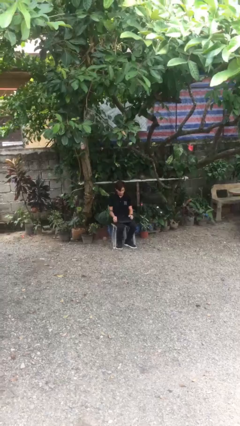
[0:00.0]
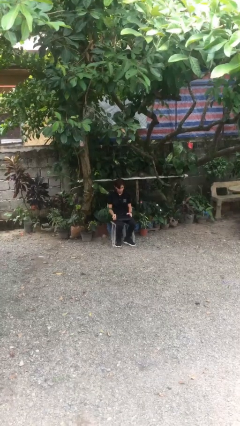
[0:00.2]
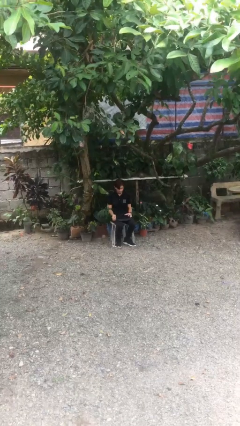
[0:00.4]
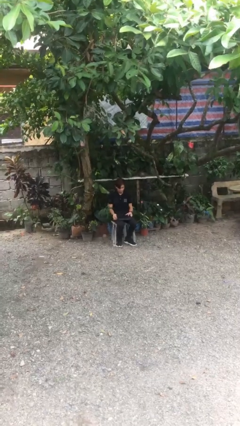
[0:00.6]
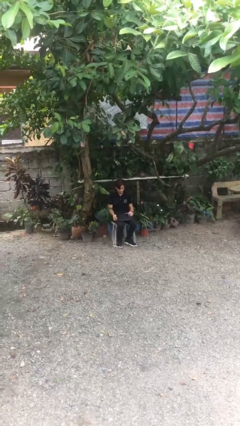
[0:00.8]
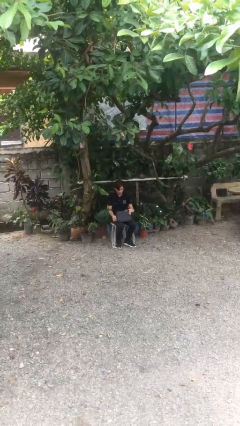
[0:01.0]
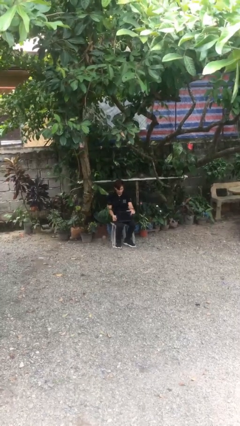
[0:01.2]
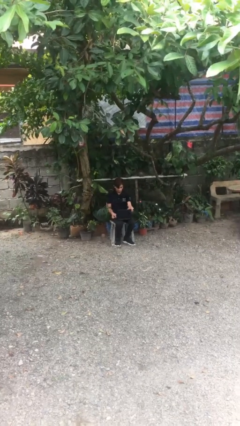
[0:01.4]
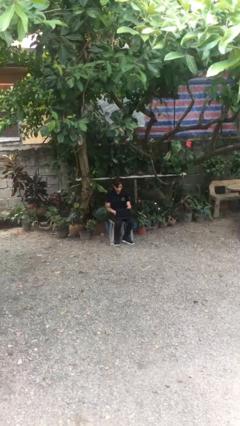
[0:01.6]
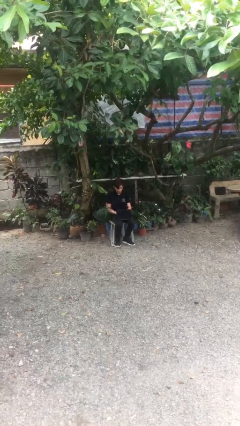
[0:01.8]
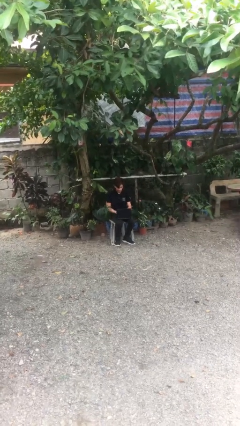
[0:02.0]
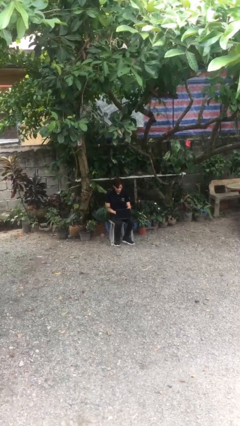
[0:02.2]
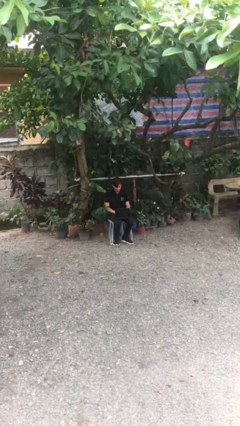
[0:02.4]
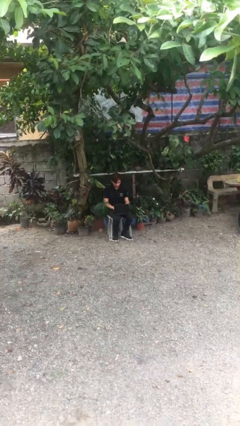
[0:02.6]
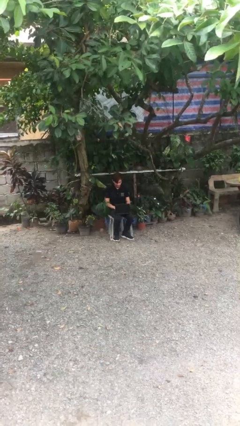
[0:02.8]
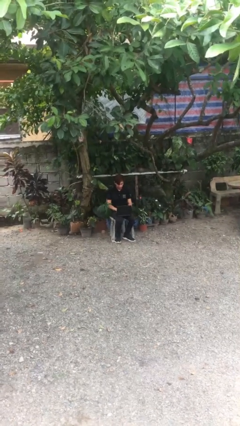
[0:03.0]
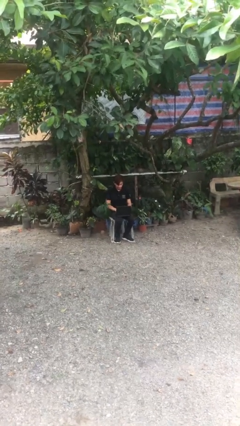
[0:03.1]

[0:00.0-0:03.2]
person interacts with laptop

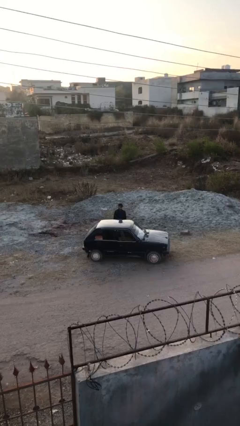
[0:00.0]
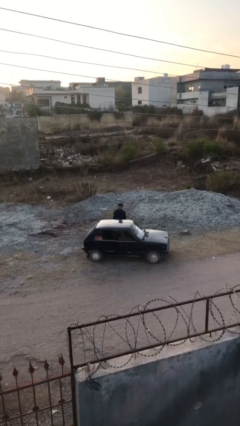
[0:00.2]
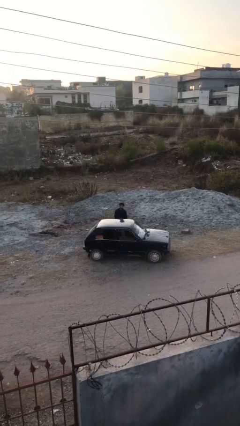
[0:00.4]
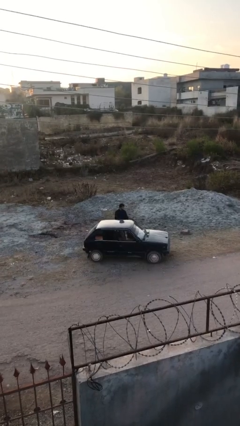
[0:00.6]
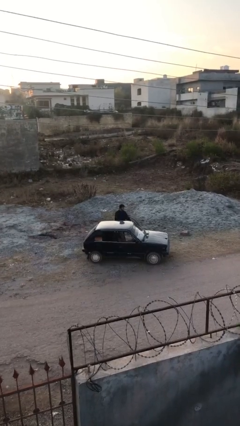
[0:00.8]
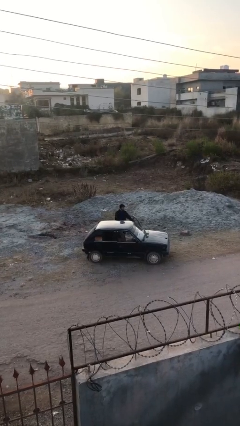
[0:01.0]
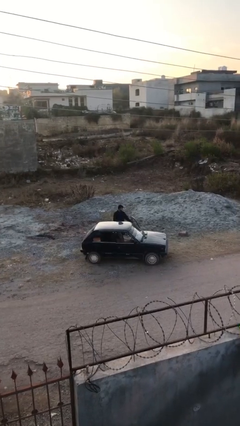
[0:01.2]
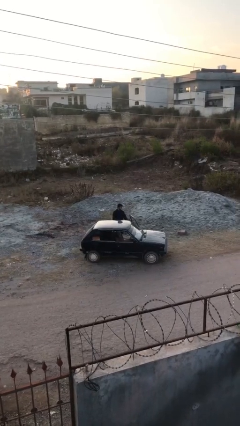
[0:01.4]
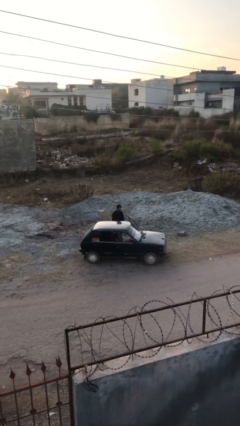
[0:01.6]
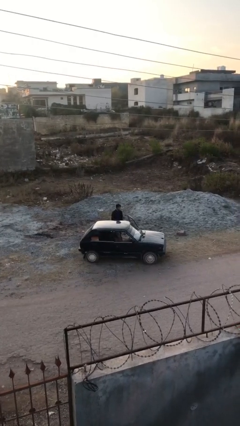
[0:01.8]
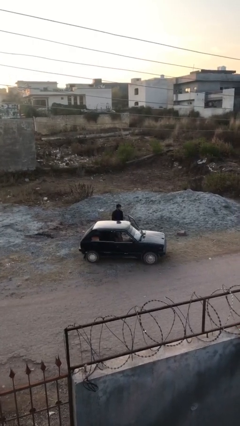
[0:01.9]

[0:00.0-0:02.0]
person opens car door

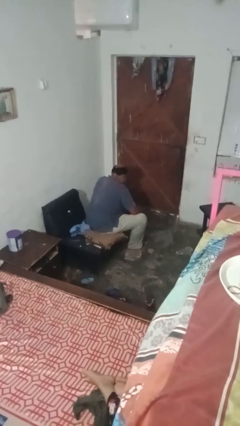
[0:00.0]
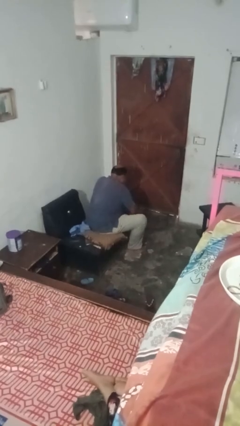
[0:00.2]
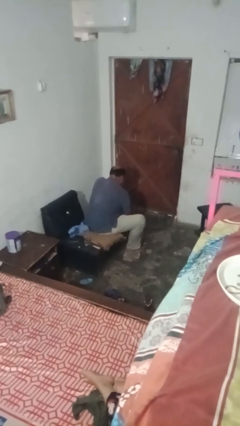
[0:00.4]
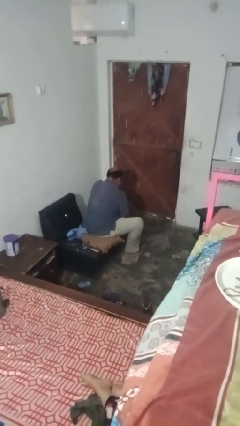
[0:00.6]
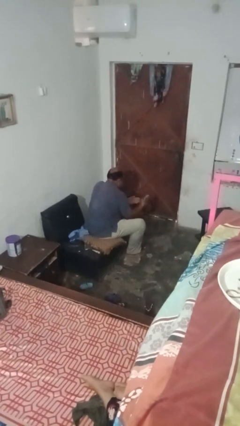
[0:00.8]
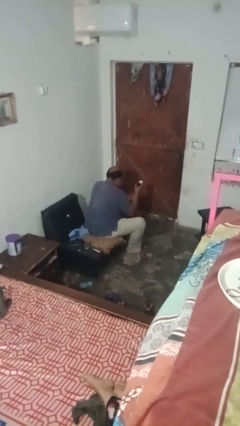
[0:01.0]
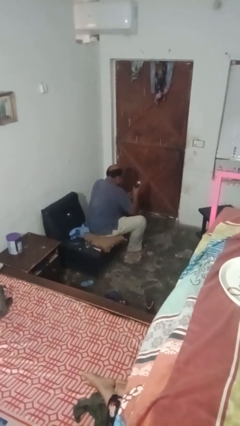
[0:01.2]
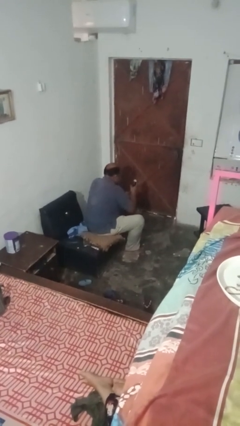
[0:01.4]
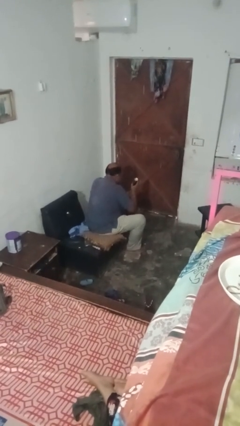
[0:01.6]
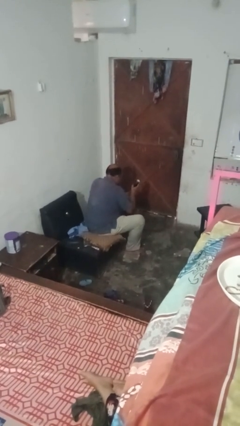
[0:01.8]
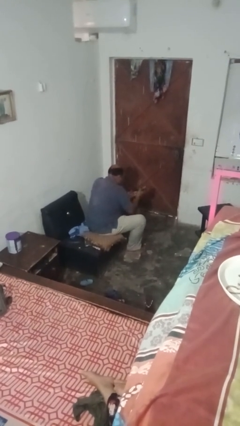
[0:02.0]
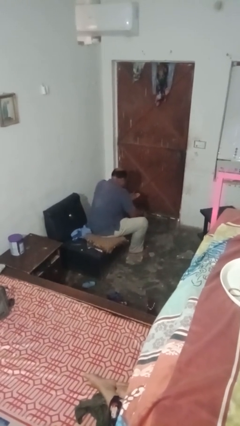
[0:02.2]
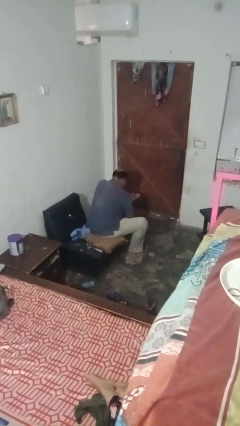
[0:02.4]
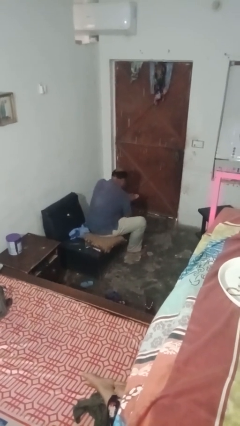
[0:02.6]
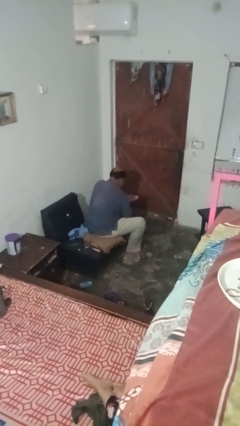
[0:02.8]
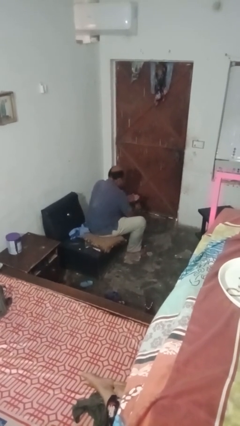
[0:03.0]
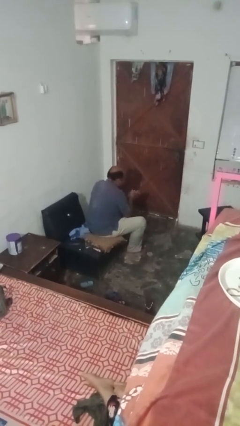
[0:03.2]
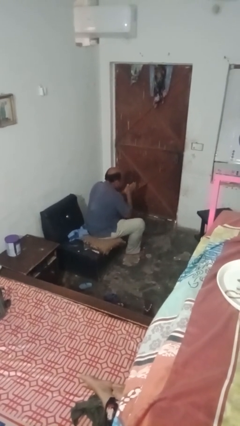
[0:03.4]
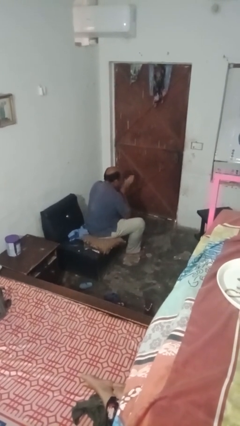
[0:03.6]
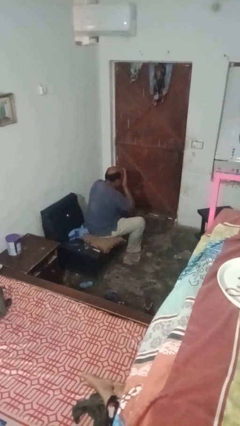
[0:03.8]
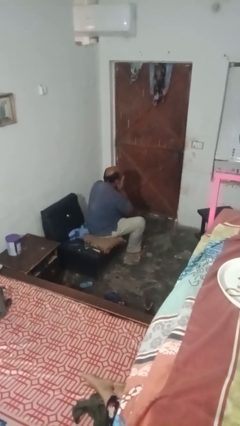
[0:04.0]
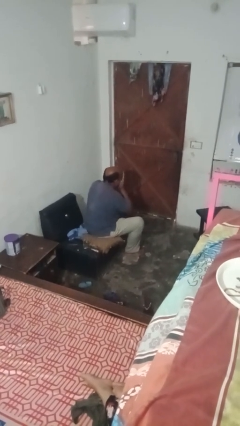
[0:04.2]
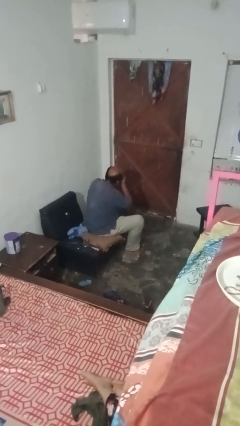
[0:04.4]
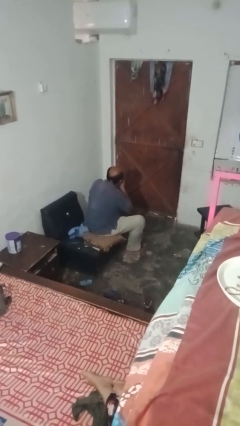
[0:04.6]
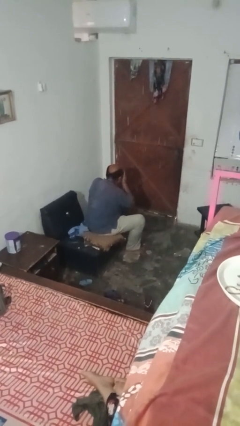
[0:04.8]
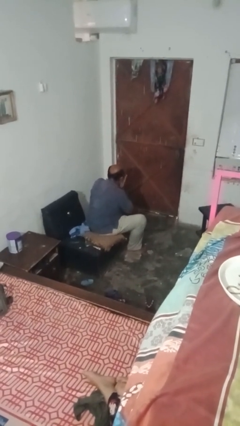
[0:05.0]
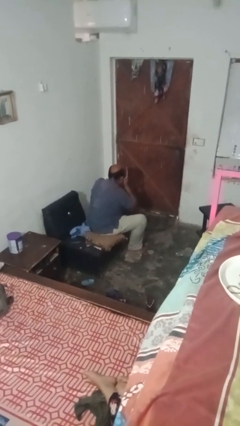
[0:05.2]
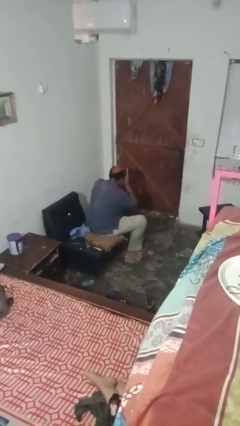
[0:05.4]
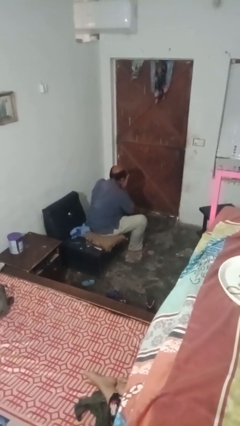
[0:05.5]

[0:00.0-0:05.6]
person applies foundation makeup

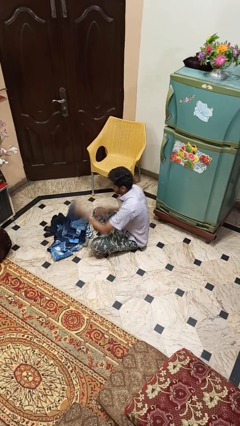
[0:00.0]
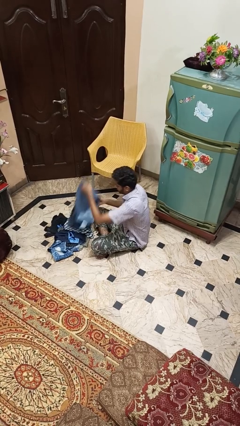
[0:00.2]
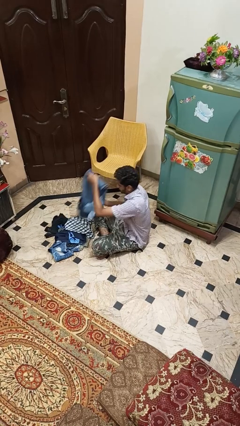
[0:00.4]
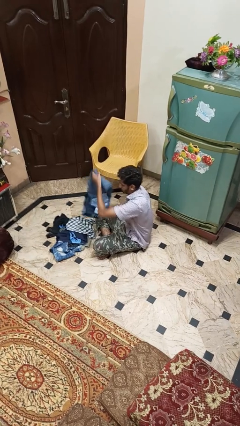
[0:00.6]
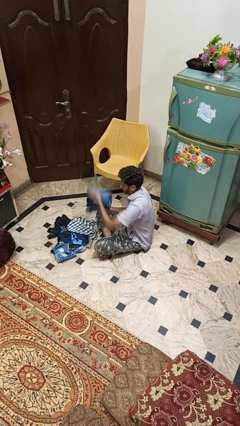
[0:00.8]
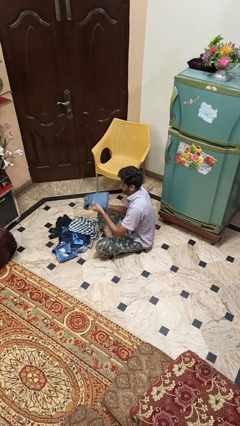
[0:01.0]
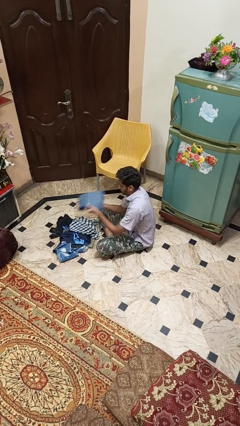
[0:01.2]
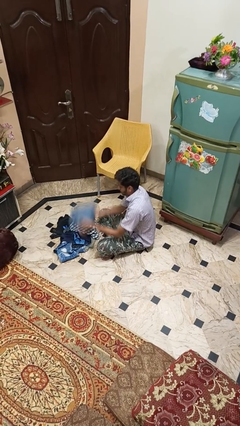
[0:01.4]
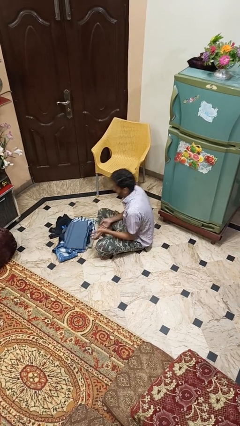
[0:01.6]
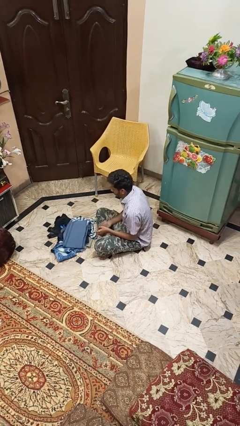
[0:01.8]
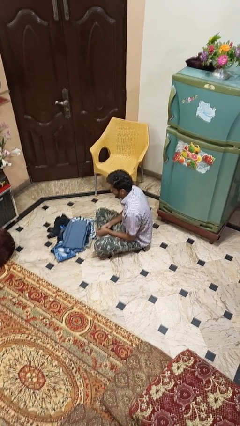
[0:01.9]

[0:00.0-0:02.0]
person folds pants

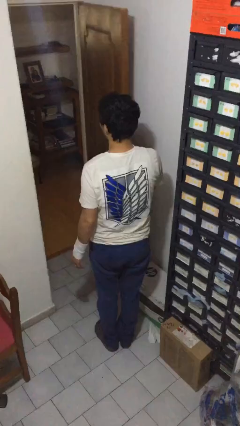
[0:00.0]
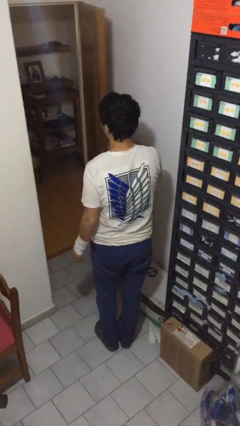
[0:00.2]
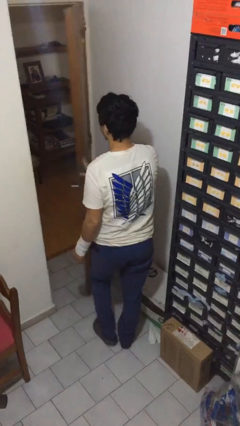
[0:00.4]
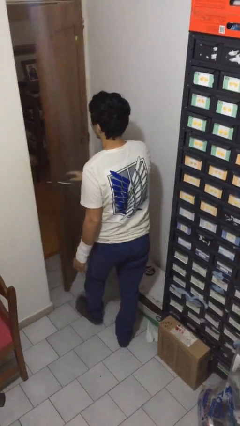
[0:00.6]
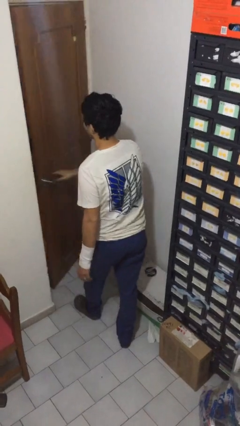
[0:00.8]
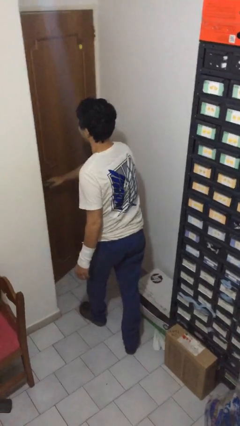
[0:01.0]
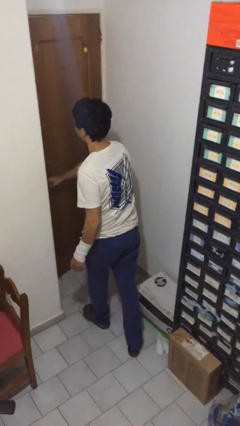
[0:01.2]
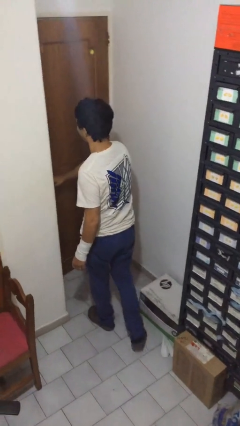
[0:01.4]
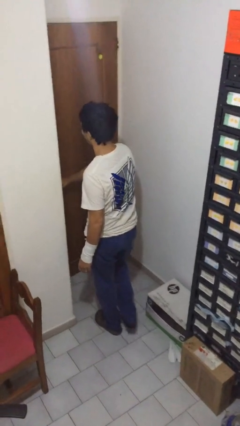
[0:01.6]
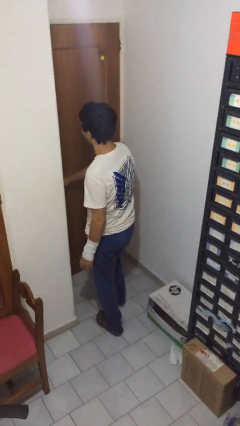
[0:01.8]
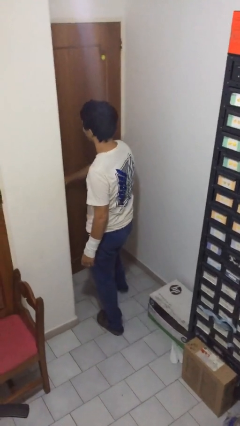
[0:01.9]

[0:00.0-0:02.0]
person closes facility door

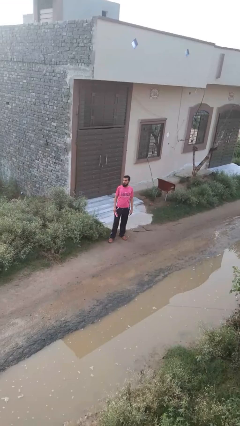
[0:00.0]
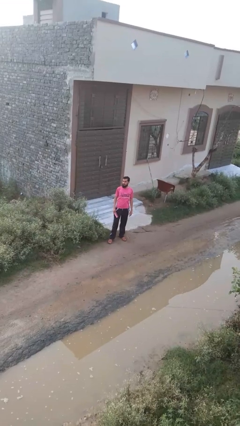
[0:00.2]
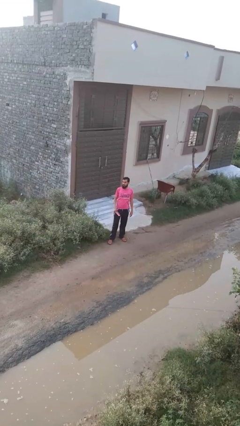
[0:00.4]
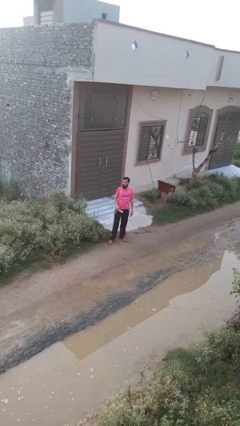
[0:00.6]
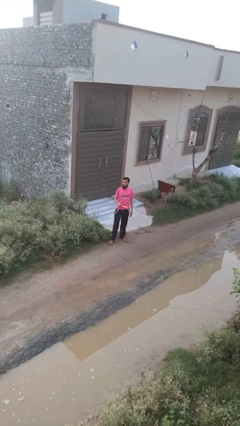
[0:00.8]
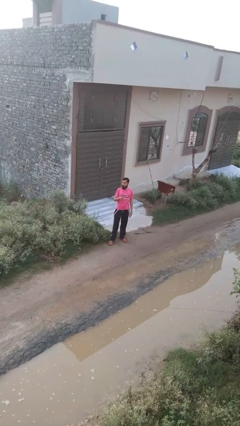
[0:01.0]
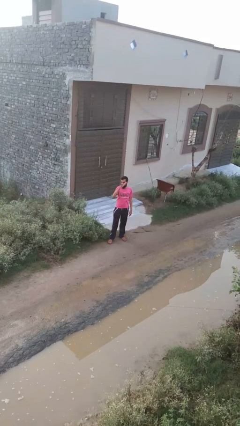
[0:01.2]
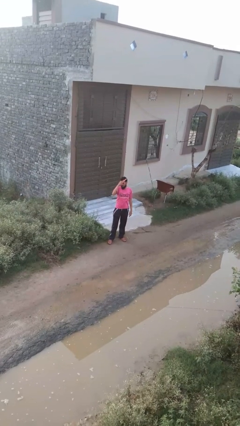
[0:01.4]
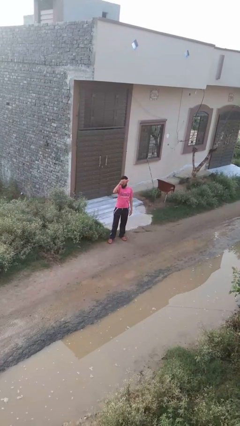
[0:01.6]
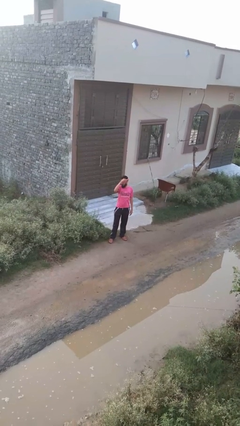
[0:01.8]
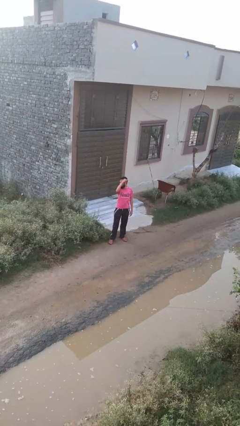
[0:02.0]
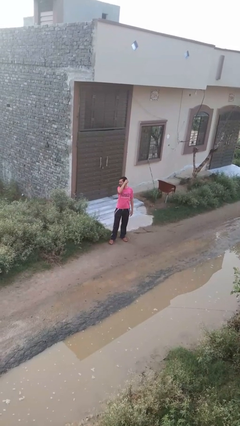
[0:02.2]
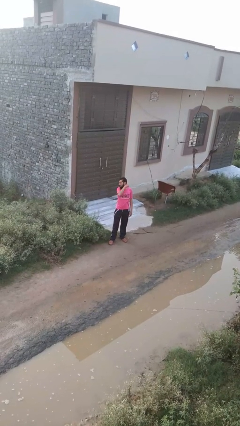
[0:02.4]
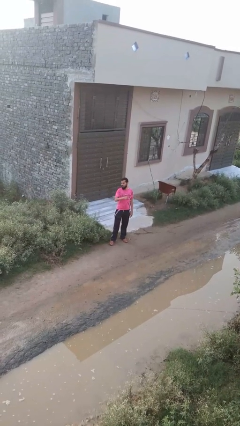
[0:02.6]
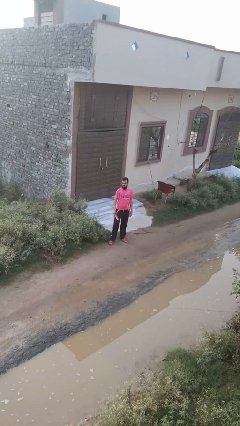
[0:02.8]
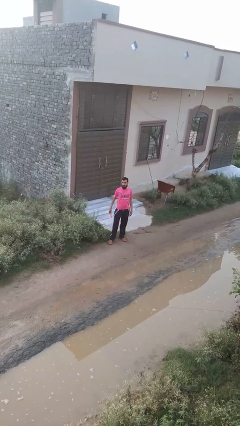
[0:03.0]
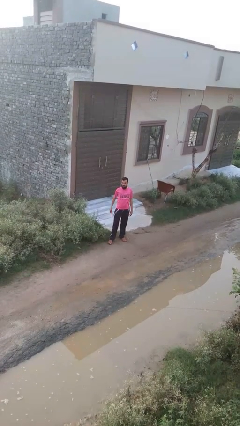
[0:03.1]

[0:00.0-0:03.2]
person brushes hair
